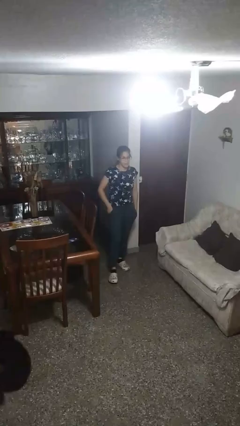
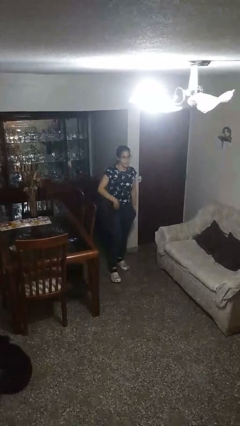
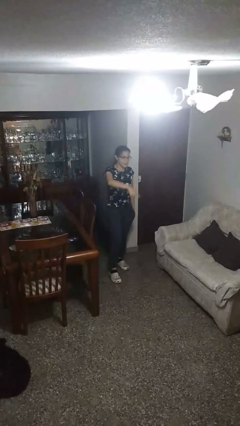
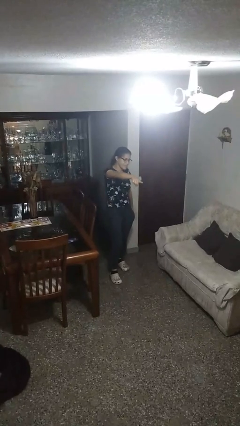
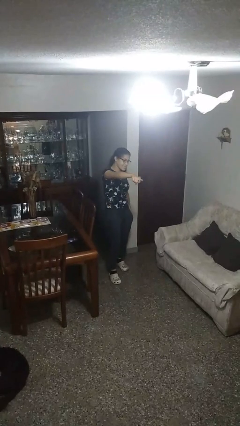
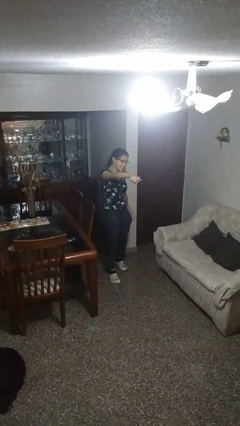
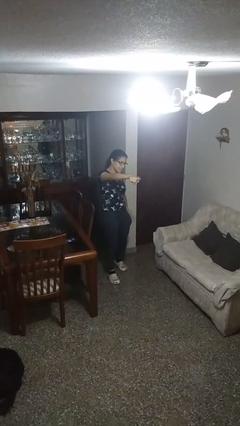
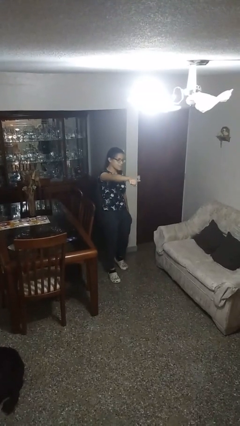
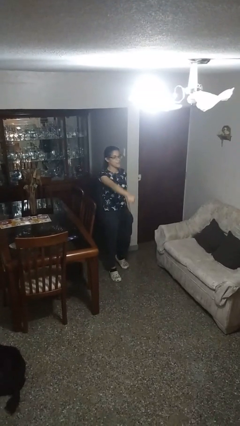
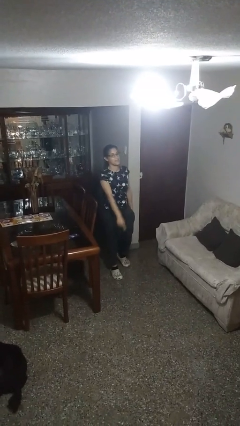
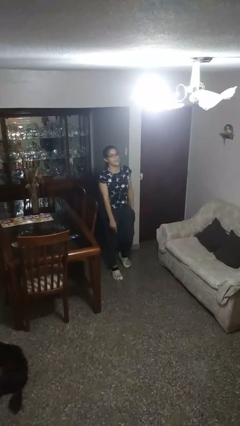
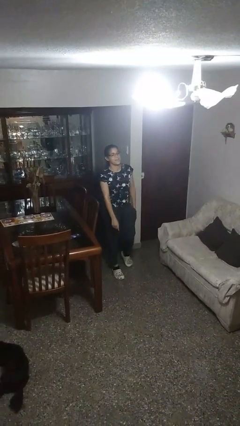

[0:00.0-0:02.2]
person points at person

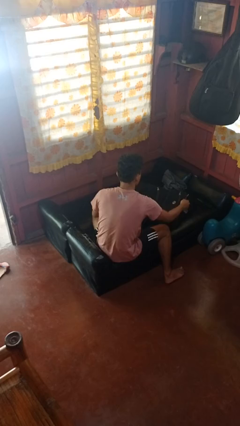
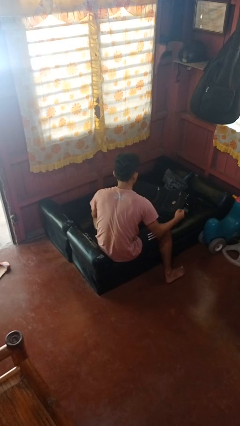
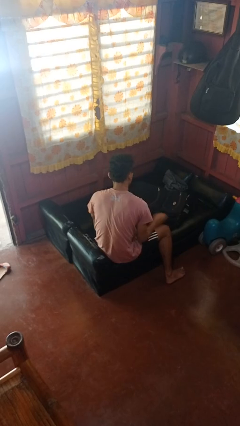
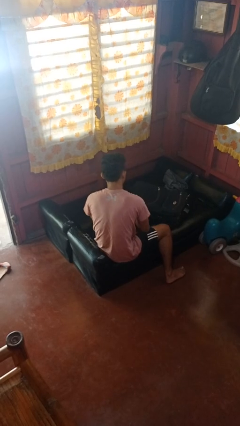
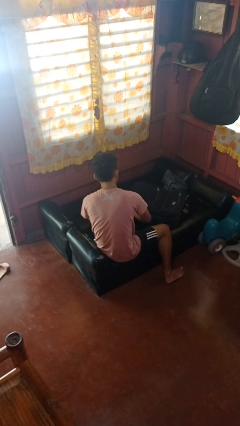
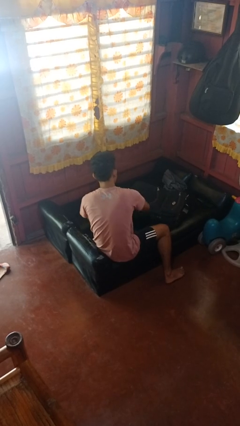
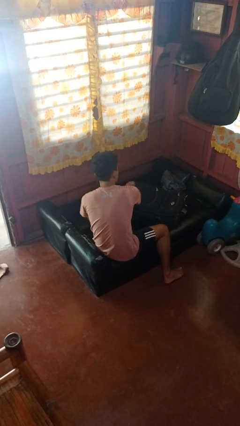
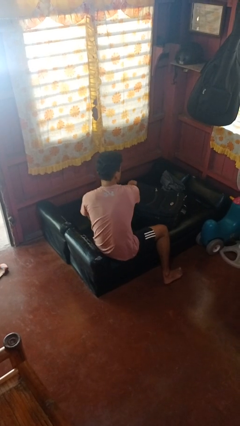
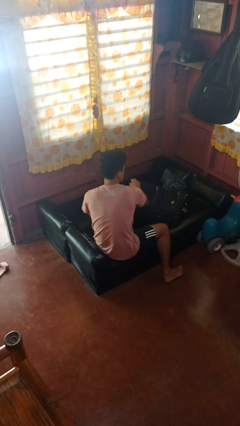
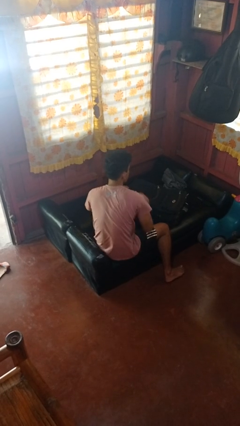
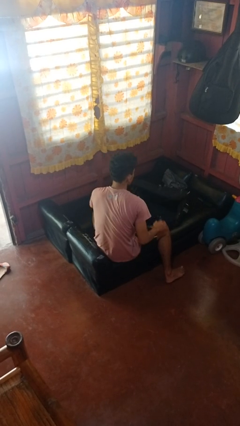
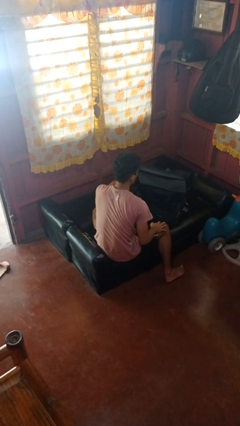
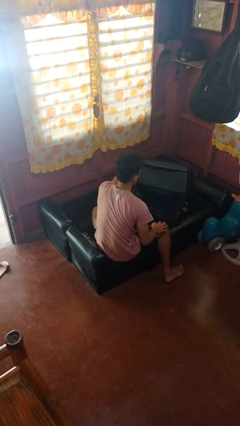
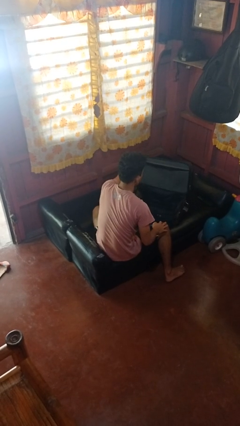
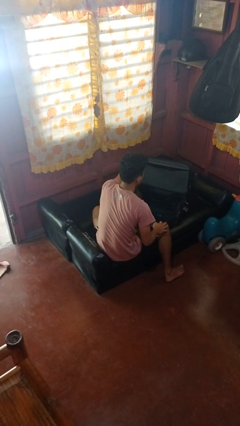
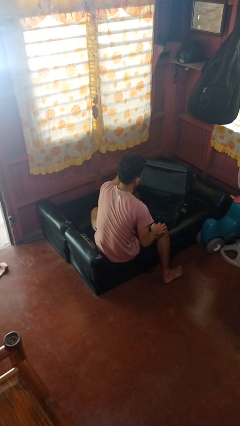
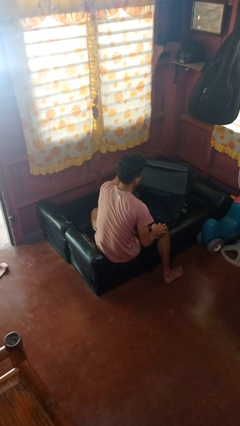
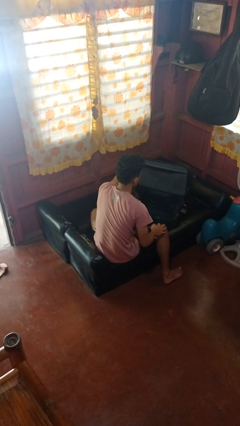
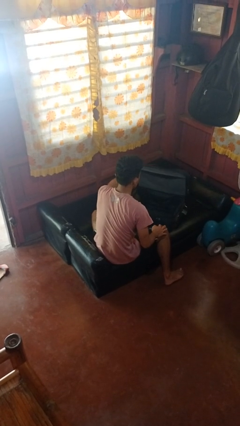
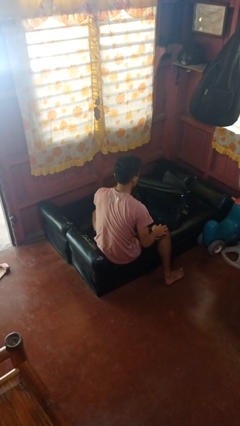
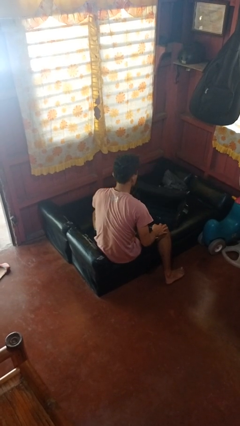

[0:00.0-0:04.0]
person opens suitcase

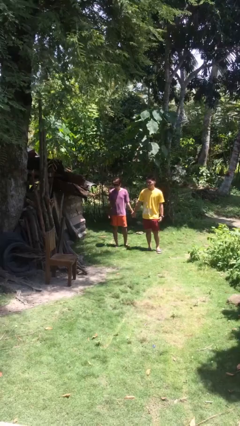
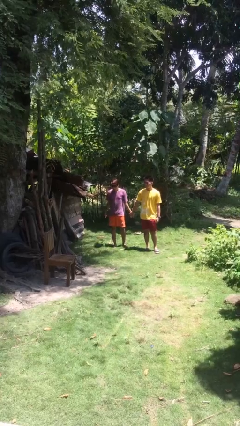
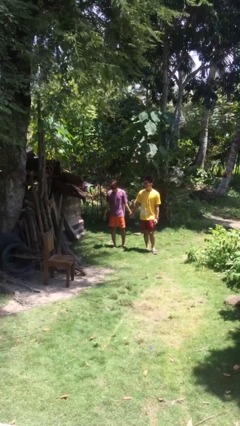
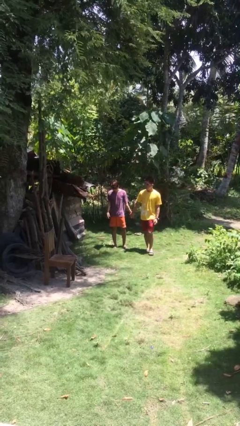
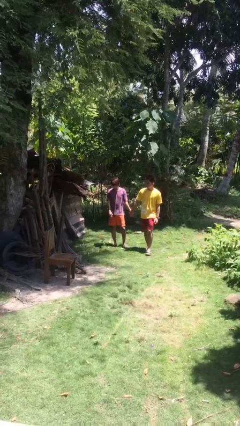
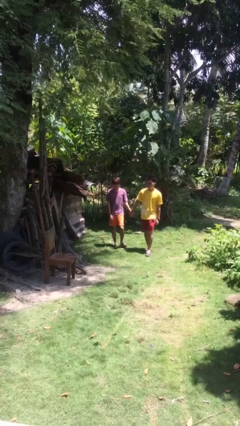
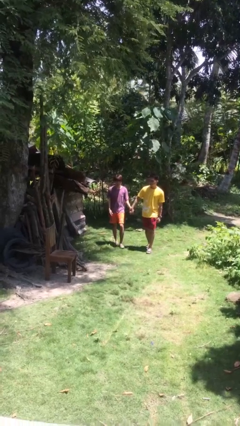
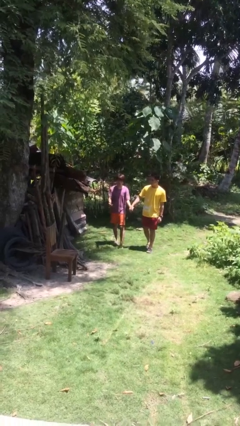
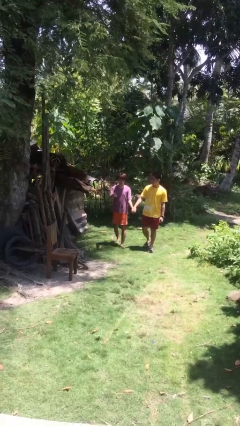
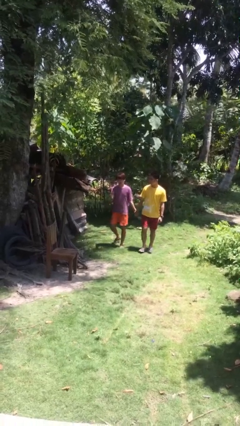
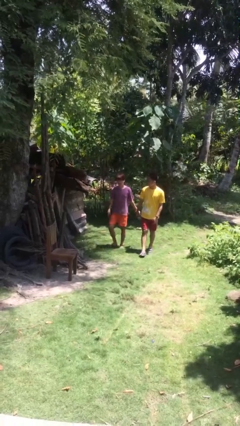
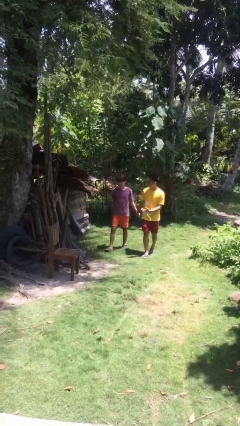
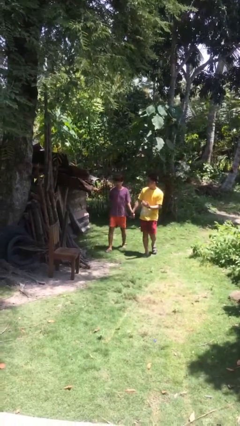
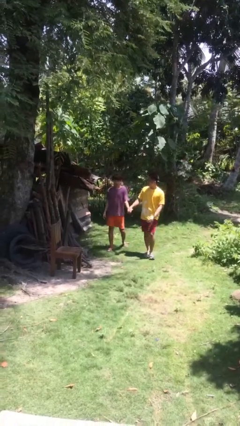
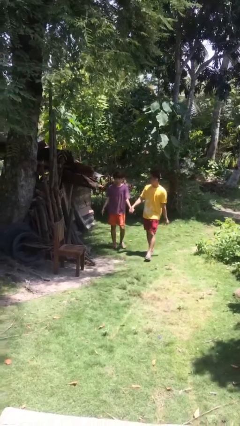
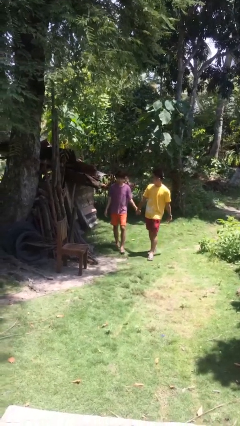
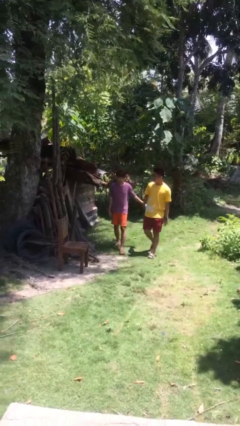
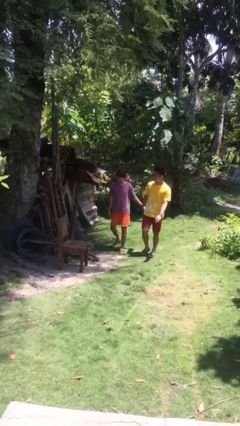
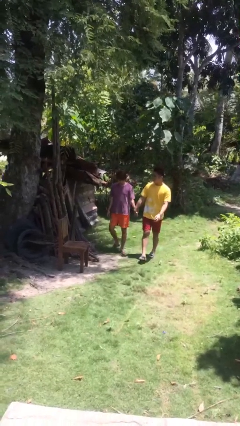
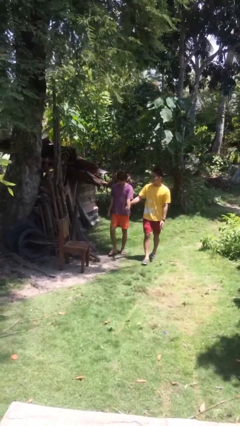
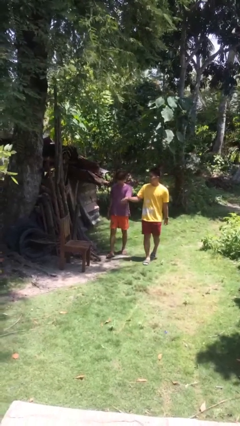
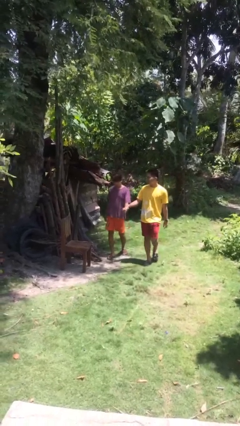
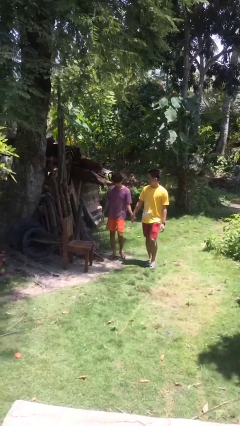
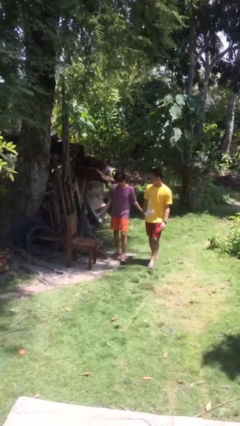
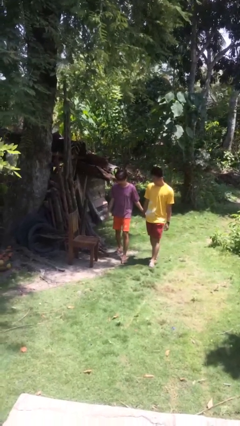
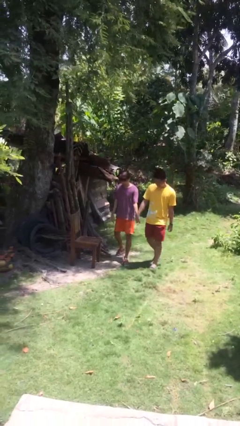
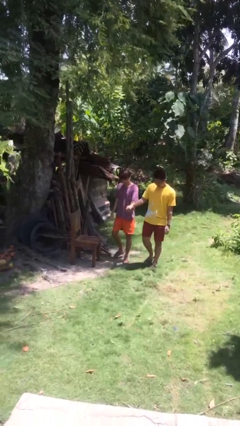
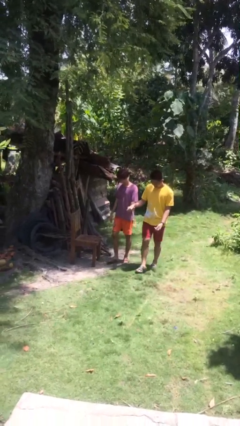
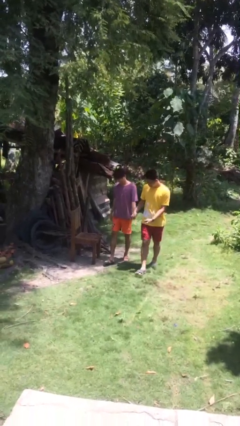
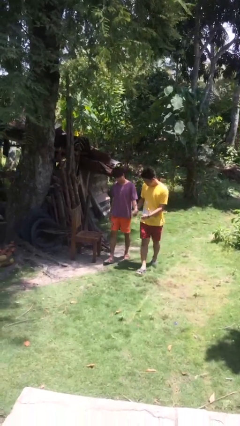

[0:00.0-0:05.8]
person holds hand

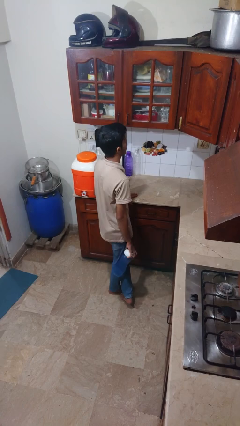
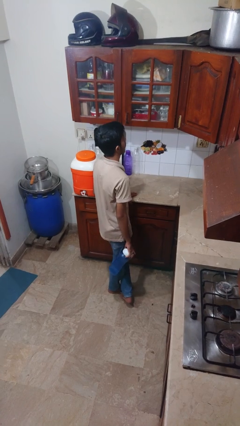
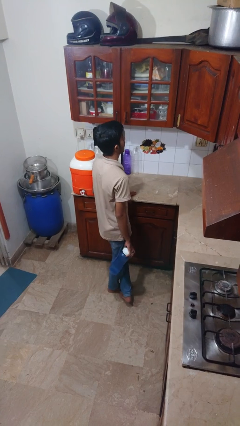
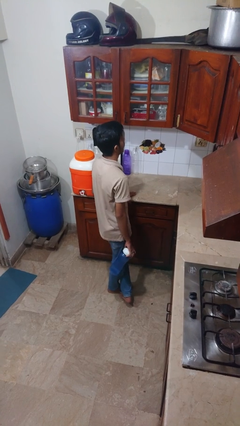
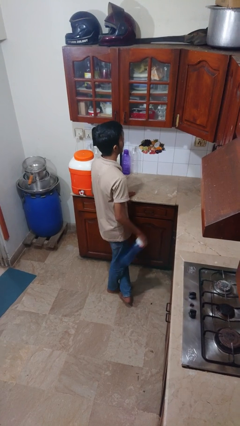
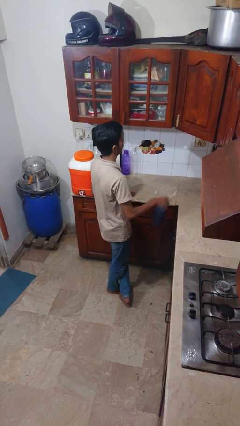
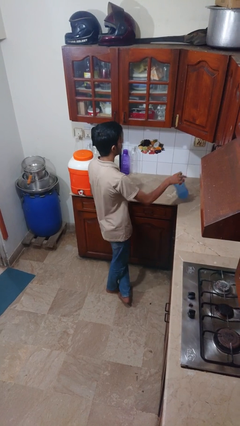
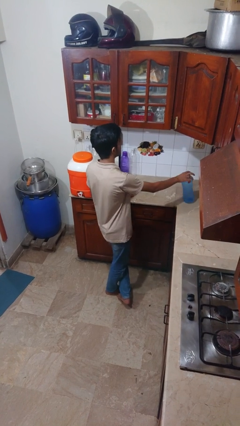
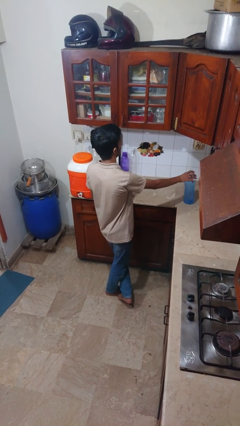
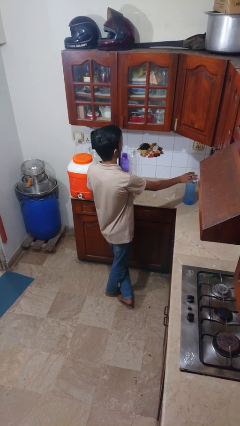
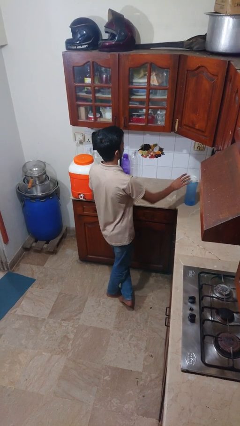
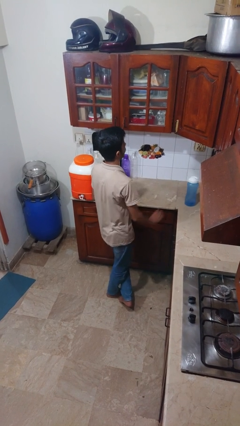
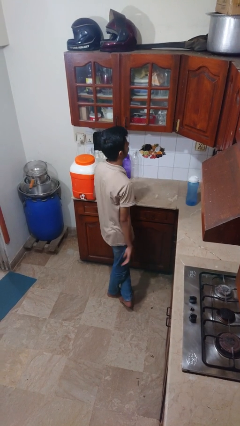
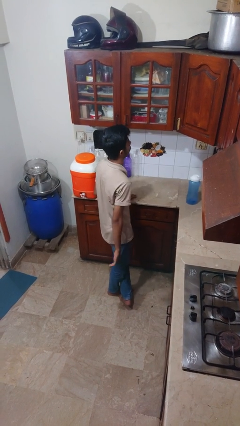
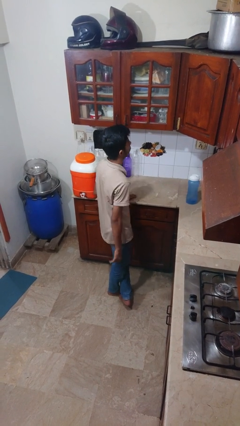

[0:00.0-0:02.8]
person puts down object on countertop

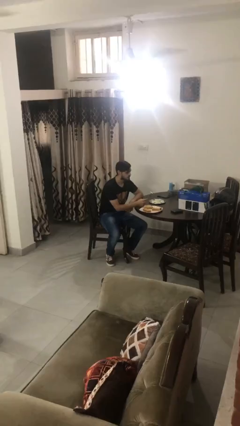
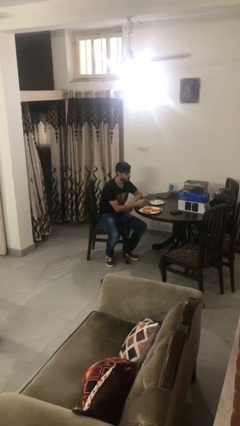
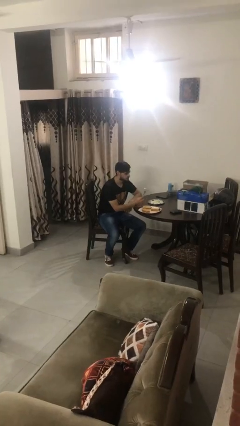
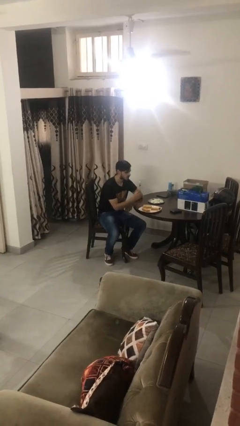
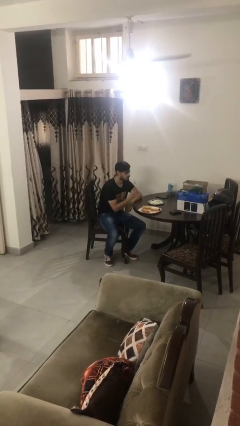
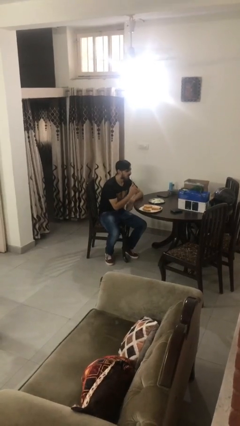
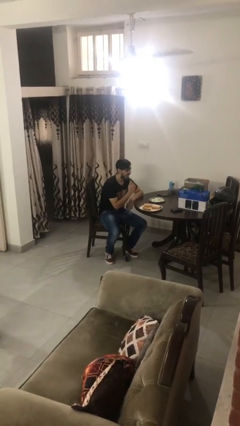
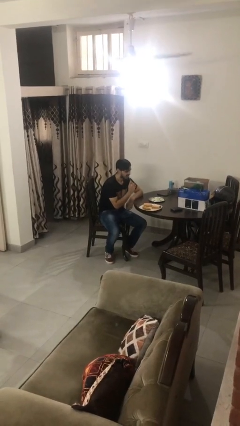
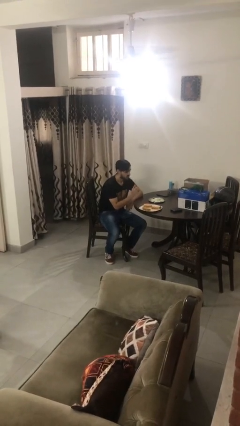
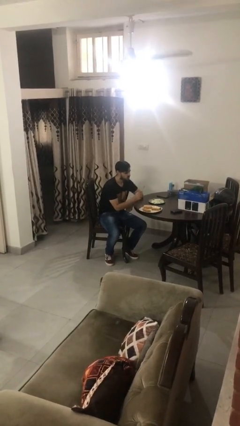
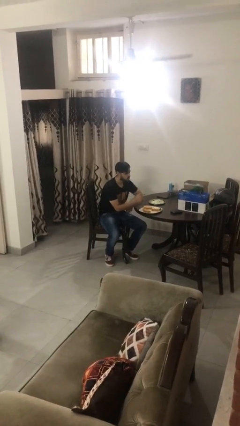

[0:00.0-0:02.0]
person eats with utensil

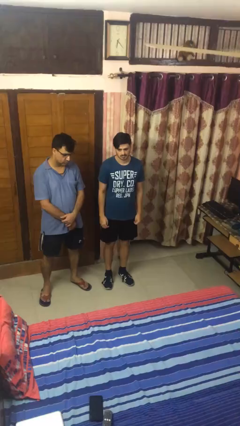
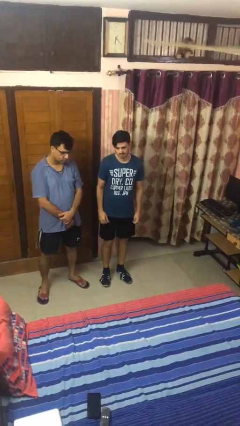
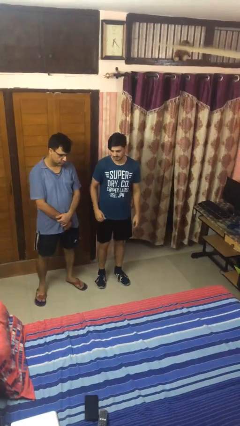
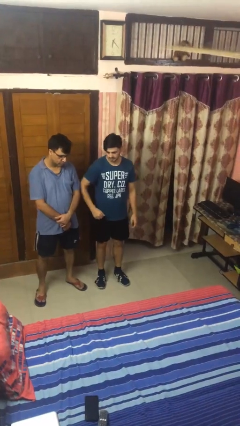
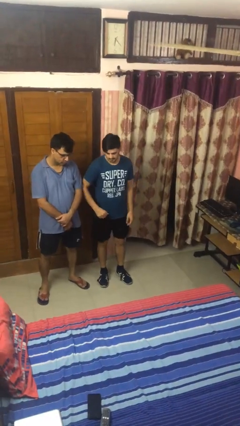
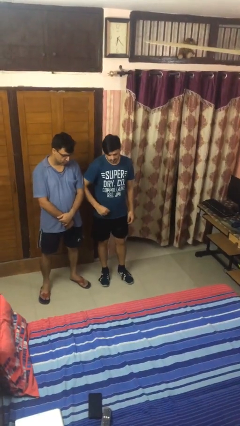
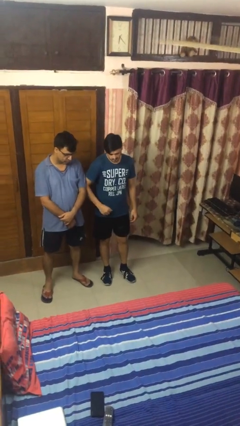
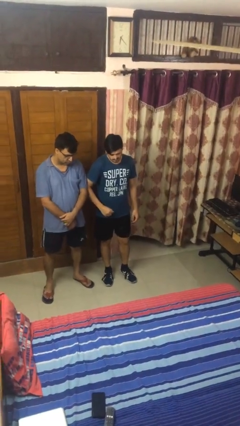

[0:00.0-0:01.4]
person nudges person with elbow
